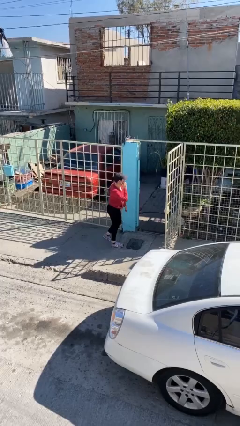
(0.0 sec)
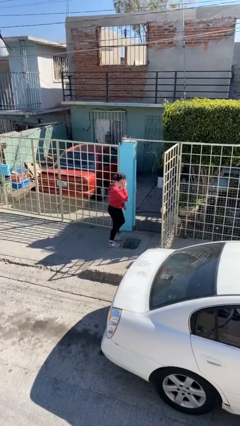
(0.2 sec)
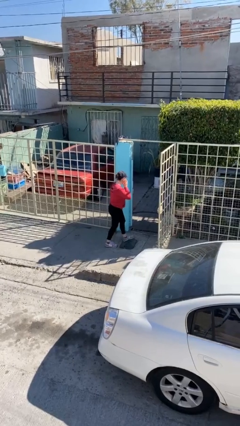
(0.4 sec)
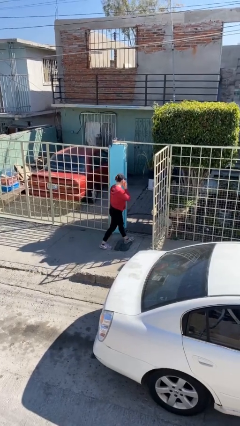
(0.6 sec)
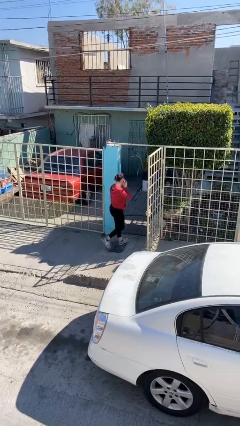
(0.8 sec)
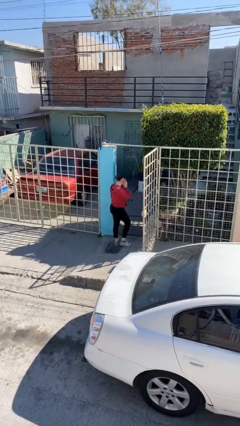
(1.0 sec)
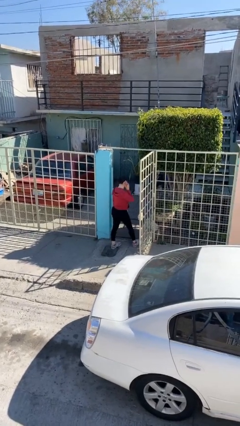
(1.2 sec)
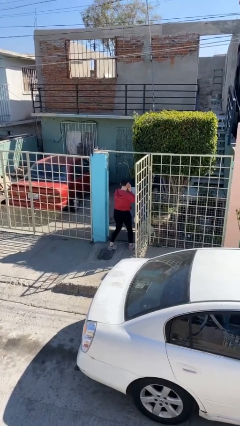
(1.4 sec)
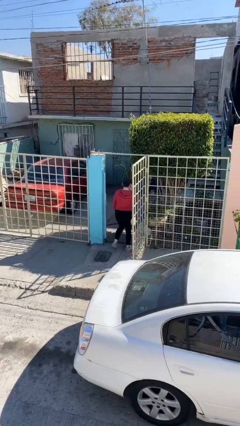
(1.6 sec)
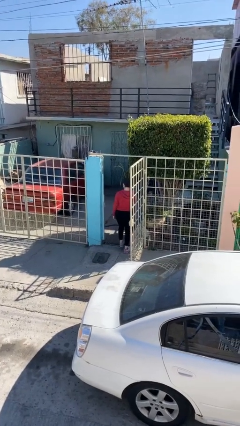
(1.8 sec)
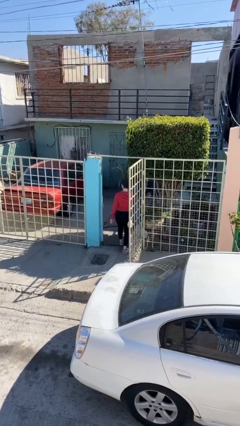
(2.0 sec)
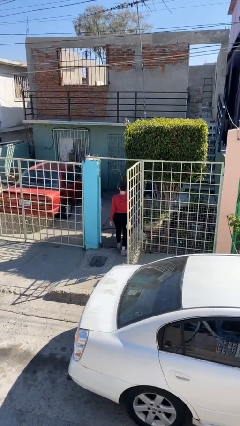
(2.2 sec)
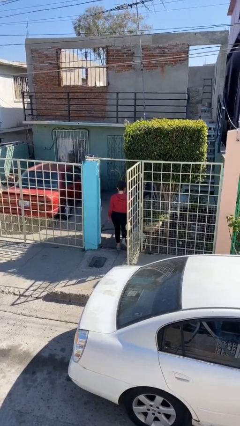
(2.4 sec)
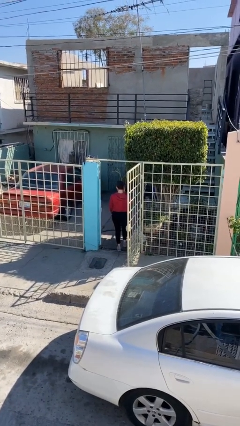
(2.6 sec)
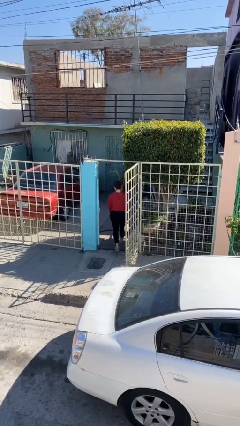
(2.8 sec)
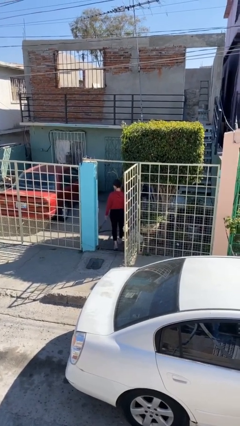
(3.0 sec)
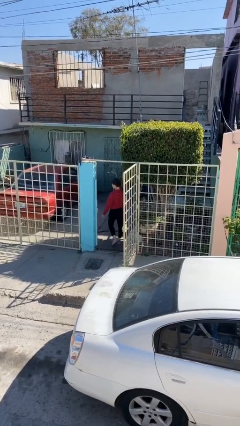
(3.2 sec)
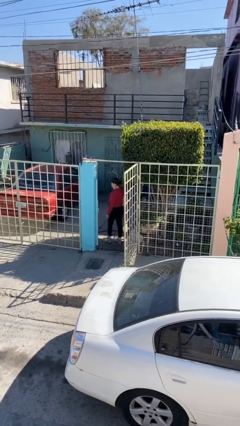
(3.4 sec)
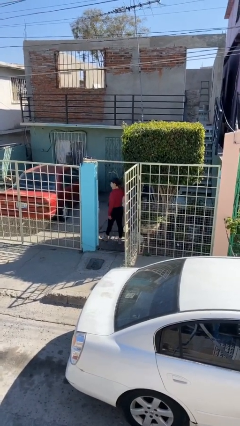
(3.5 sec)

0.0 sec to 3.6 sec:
person exits scene through structure

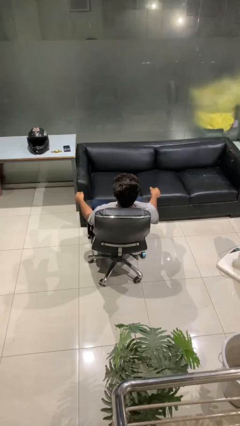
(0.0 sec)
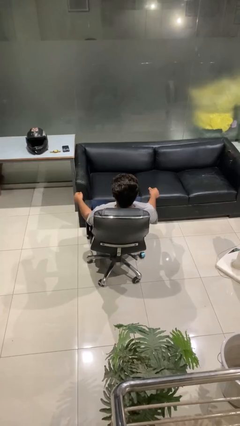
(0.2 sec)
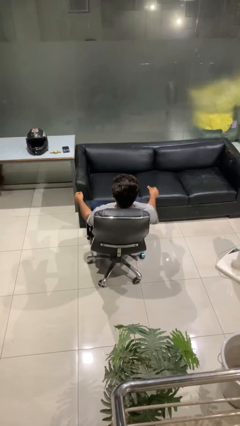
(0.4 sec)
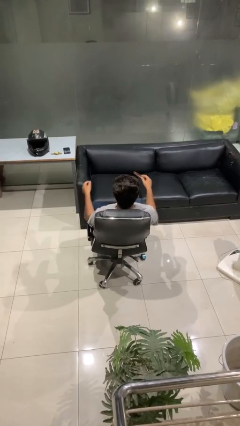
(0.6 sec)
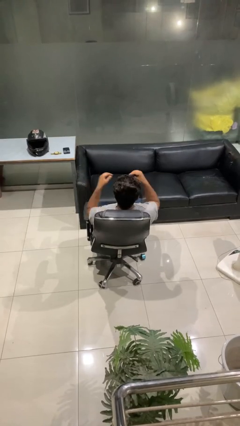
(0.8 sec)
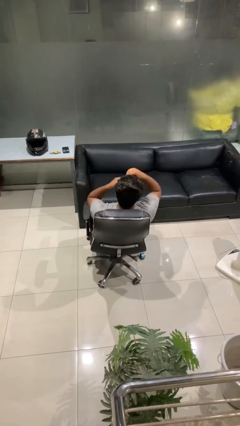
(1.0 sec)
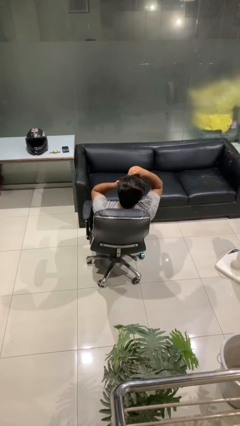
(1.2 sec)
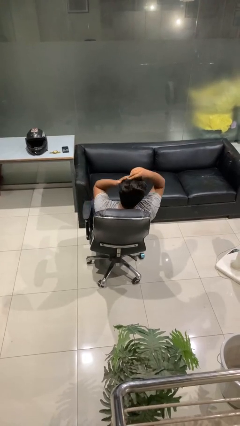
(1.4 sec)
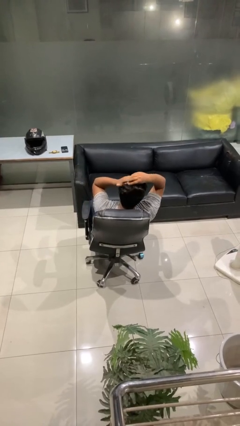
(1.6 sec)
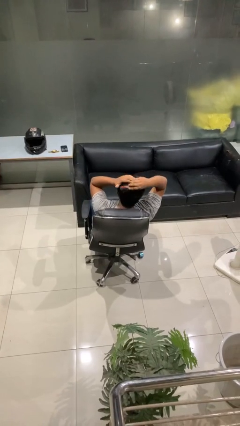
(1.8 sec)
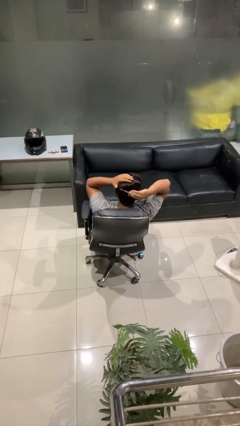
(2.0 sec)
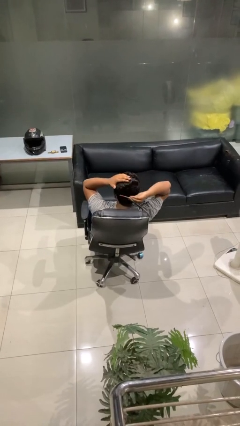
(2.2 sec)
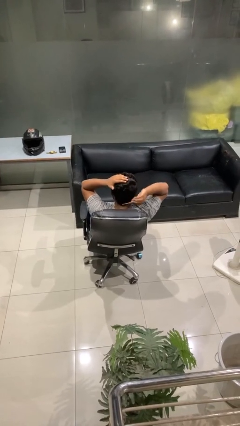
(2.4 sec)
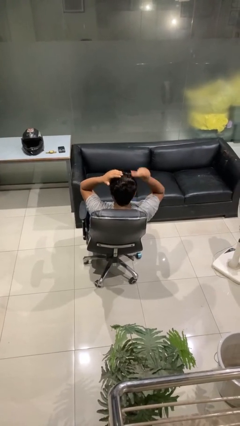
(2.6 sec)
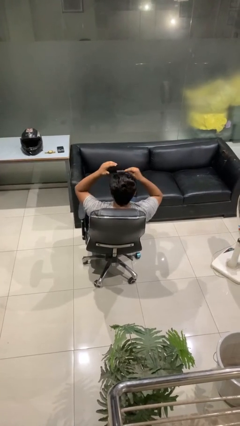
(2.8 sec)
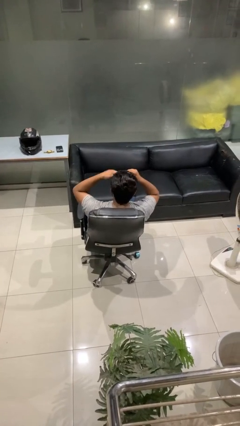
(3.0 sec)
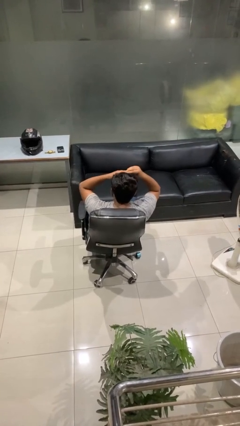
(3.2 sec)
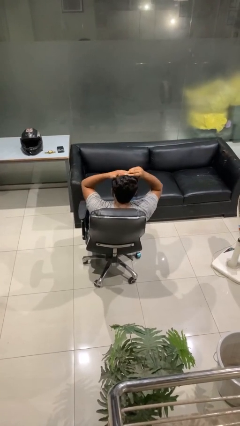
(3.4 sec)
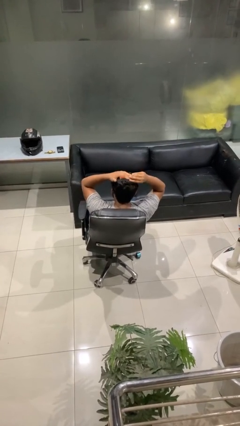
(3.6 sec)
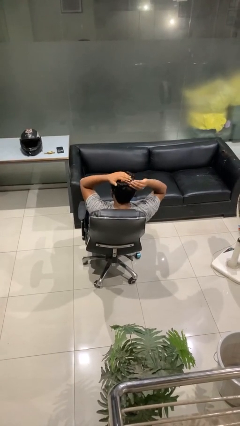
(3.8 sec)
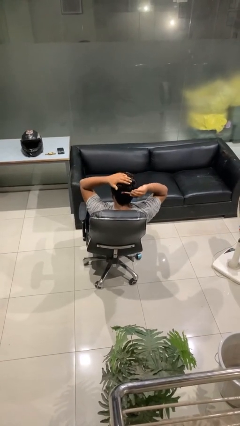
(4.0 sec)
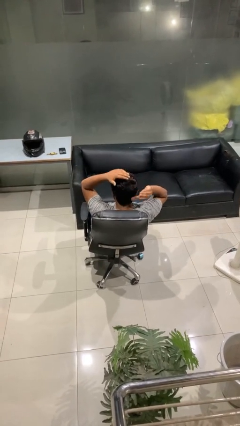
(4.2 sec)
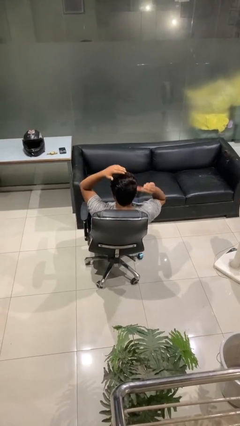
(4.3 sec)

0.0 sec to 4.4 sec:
person brushes hair

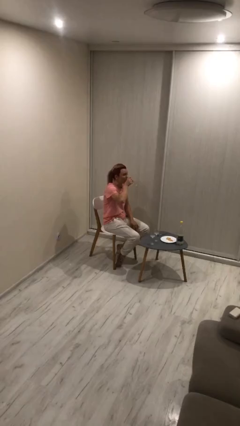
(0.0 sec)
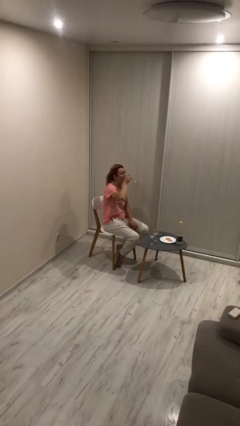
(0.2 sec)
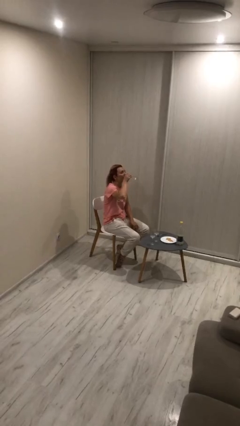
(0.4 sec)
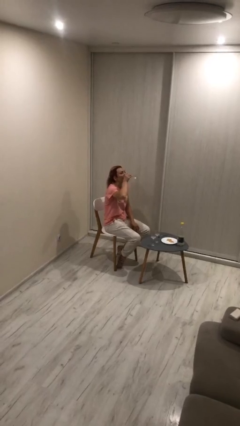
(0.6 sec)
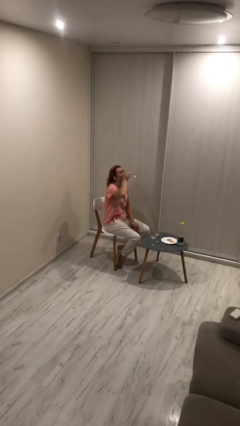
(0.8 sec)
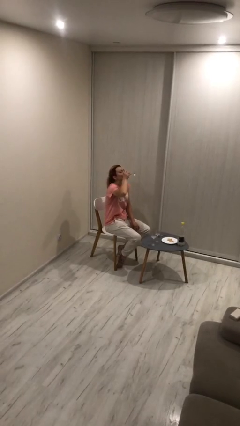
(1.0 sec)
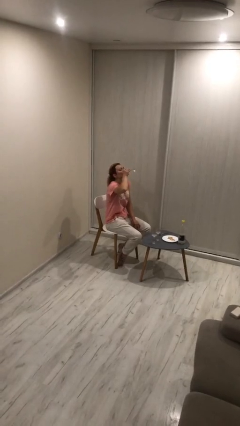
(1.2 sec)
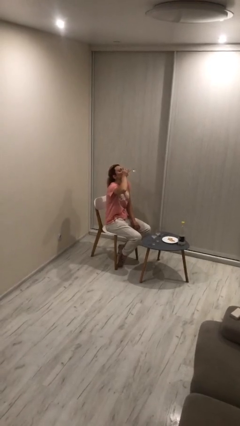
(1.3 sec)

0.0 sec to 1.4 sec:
person drinks from shotglass

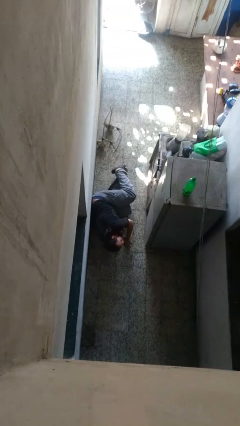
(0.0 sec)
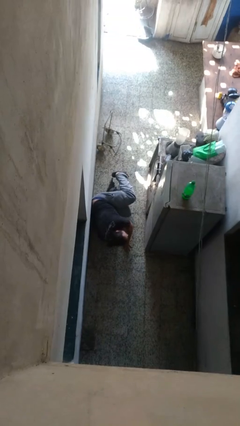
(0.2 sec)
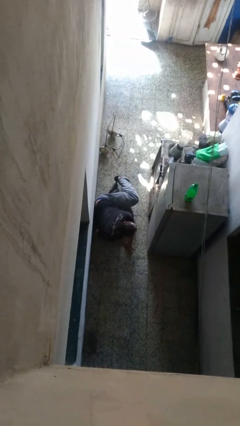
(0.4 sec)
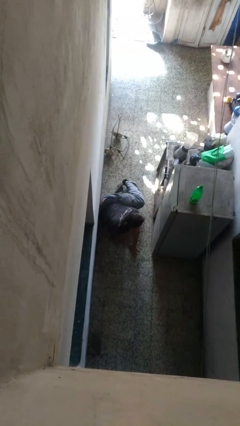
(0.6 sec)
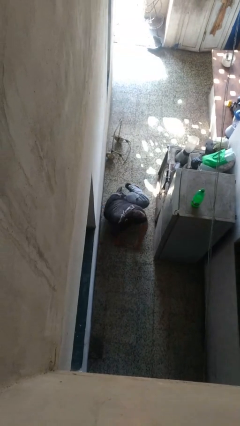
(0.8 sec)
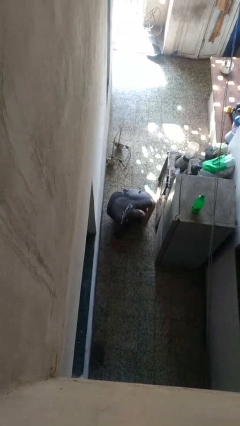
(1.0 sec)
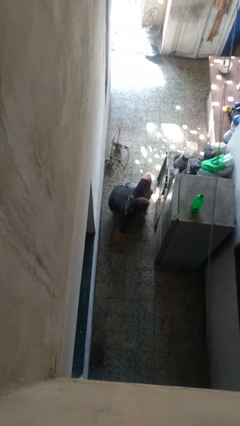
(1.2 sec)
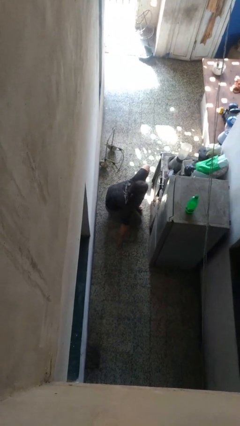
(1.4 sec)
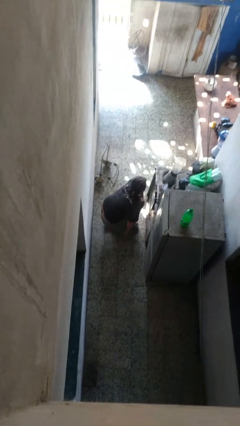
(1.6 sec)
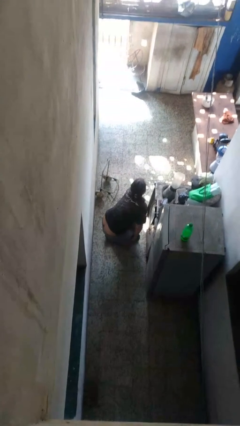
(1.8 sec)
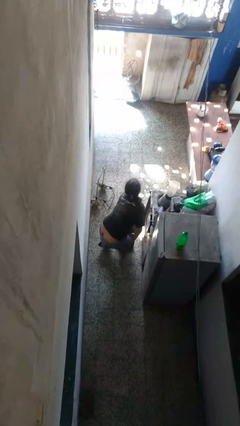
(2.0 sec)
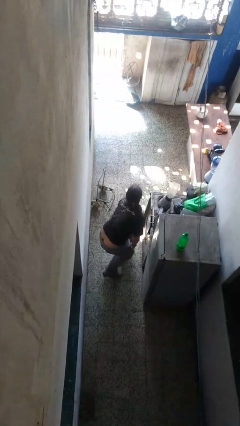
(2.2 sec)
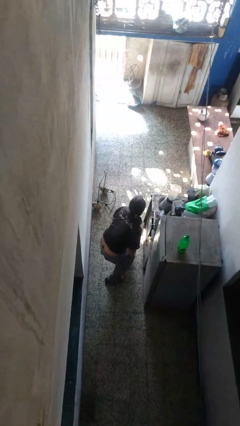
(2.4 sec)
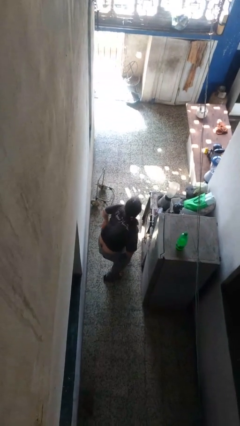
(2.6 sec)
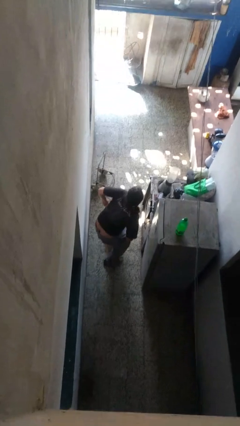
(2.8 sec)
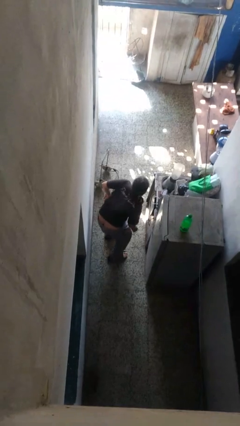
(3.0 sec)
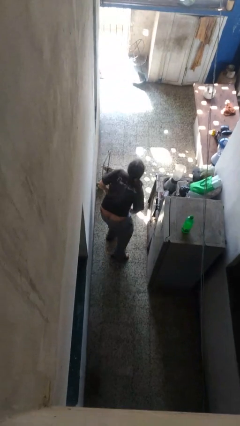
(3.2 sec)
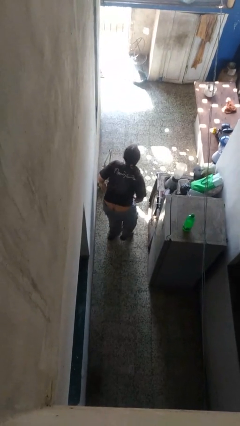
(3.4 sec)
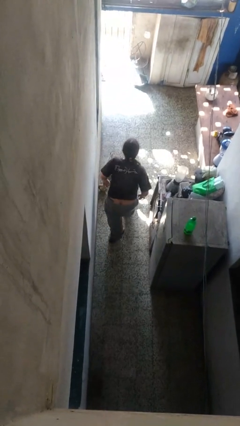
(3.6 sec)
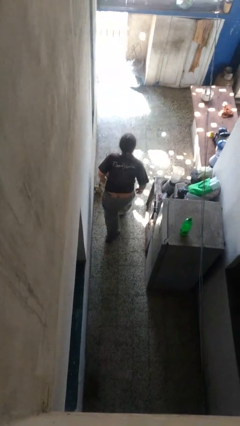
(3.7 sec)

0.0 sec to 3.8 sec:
person stands up from floor

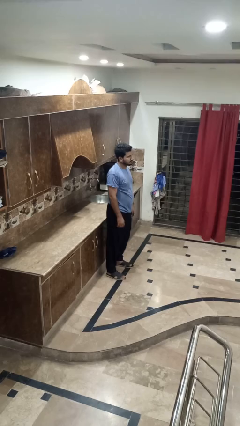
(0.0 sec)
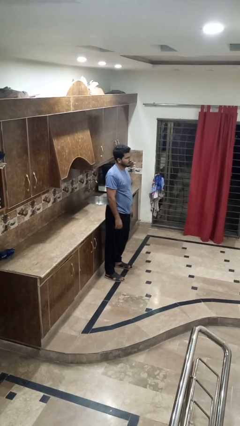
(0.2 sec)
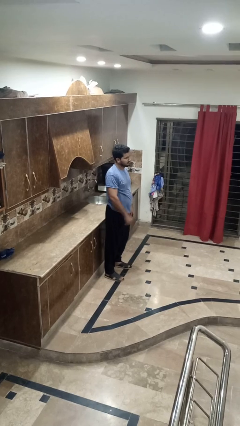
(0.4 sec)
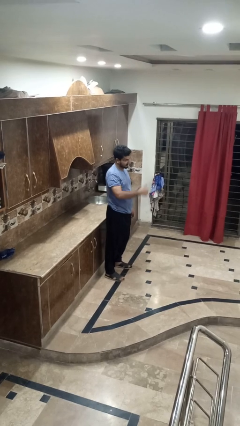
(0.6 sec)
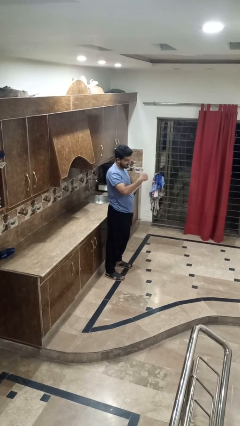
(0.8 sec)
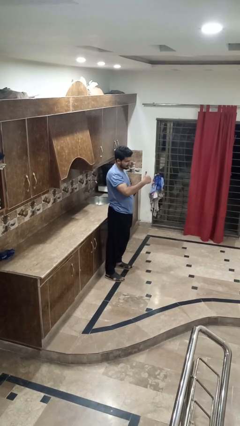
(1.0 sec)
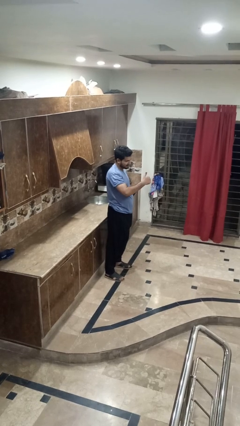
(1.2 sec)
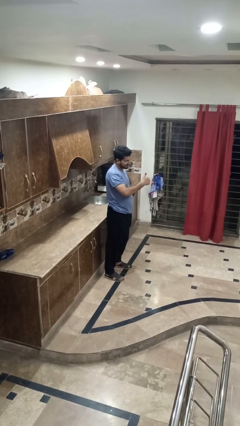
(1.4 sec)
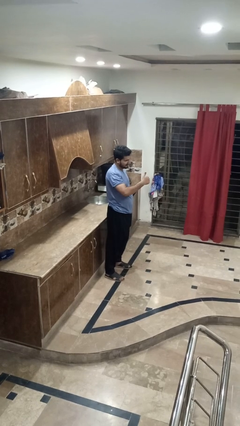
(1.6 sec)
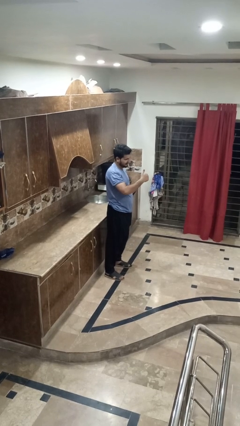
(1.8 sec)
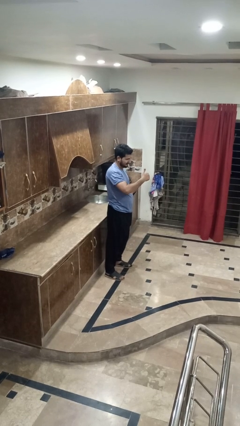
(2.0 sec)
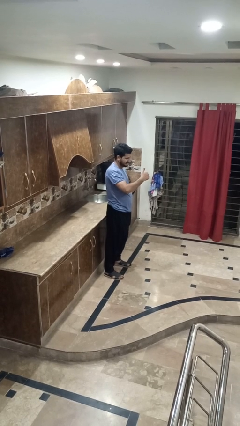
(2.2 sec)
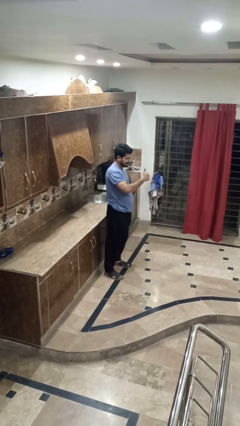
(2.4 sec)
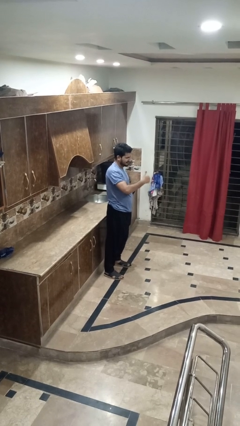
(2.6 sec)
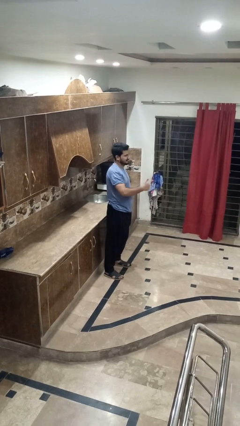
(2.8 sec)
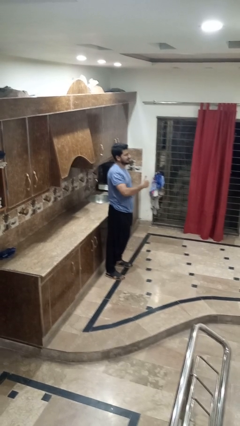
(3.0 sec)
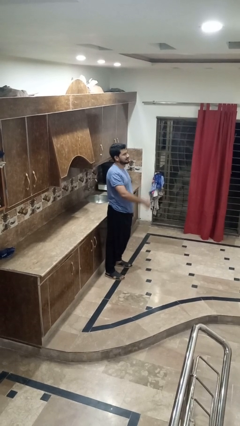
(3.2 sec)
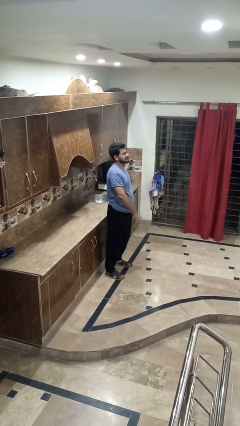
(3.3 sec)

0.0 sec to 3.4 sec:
person gestures thumbs up

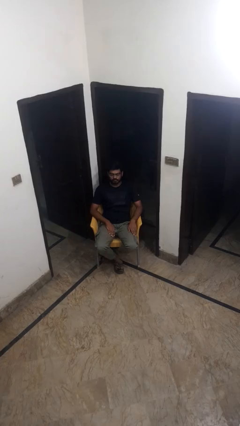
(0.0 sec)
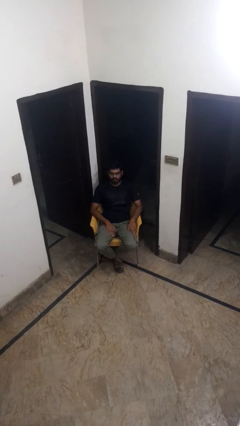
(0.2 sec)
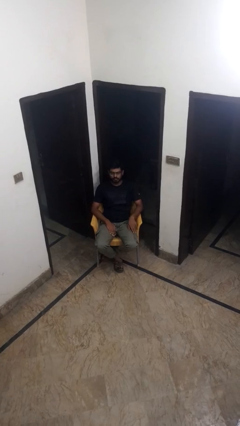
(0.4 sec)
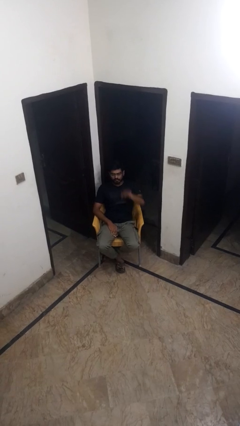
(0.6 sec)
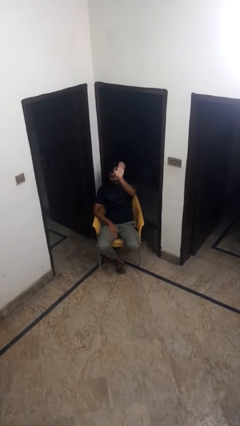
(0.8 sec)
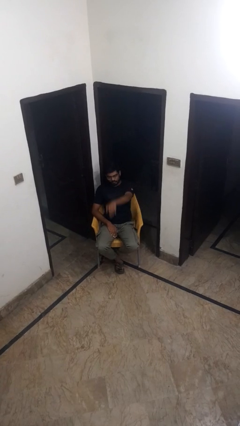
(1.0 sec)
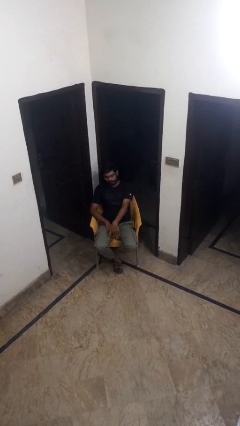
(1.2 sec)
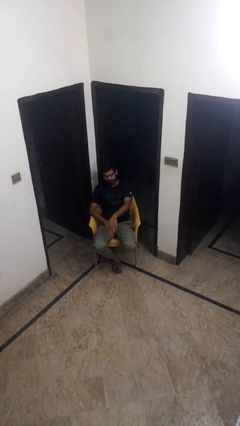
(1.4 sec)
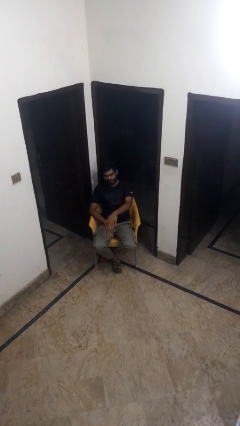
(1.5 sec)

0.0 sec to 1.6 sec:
person gestures swipe down
